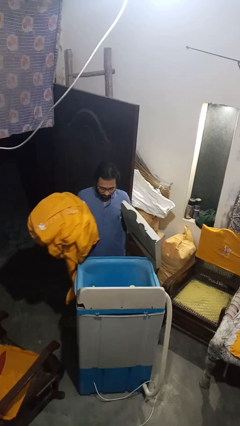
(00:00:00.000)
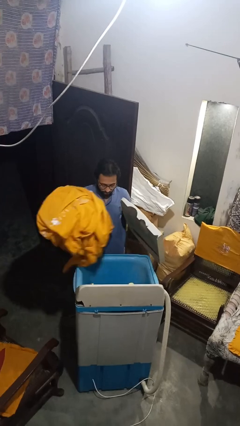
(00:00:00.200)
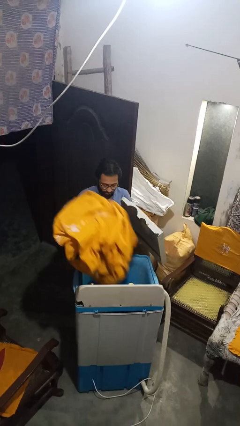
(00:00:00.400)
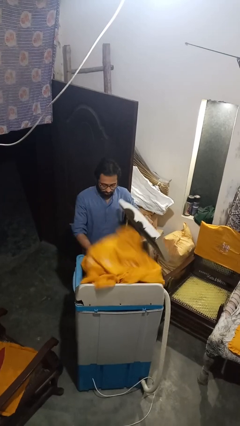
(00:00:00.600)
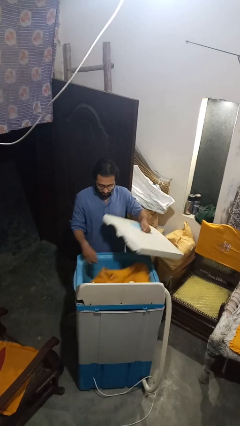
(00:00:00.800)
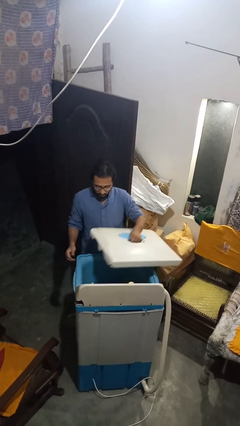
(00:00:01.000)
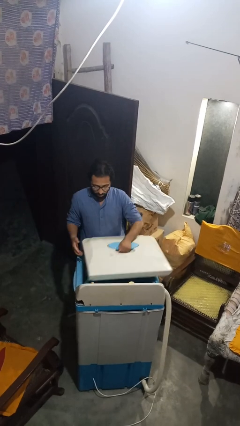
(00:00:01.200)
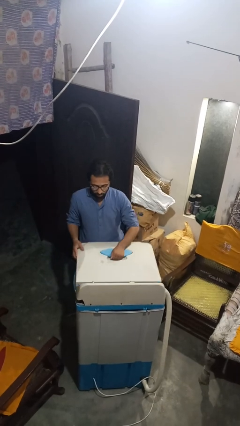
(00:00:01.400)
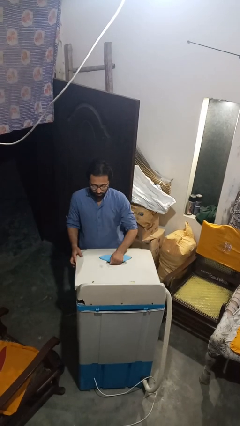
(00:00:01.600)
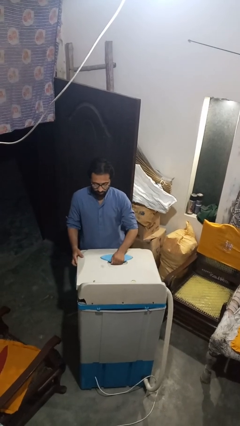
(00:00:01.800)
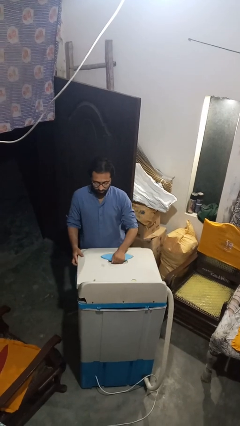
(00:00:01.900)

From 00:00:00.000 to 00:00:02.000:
person closes clothes washer

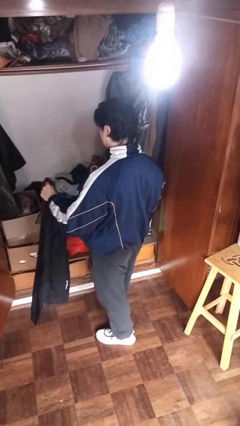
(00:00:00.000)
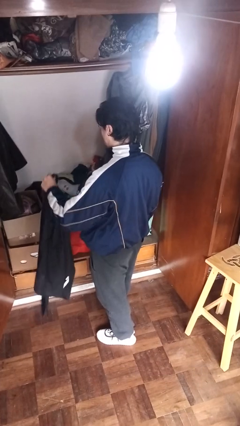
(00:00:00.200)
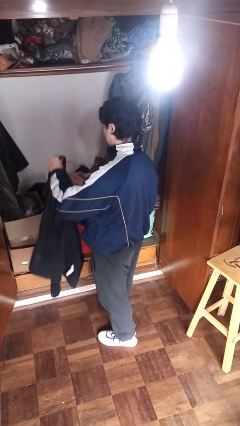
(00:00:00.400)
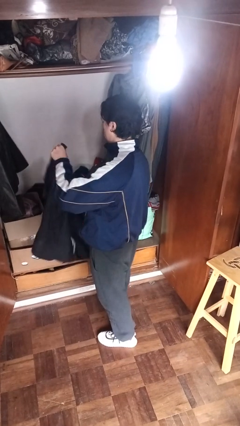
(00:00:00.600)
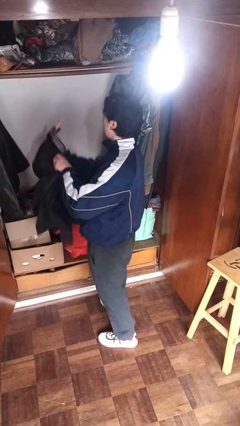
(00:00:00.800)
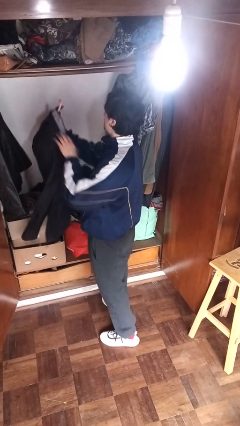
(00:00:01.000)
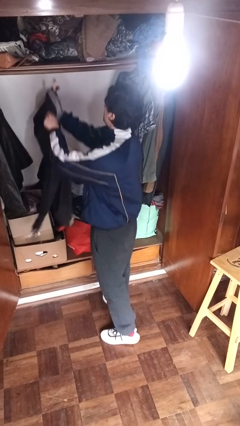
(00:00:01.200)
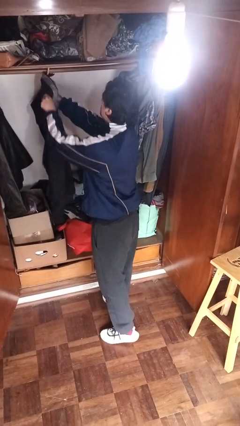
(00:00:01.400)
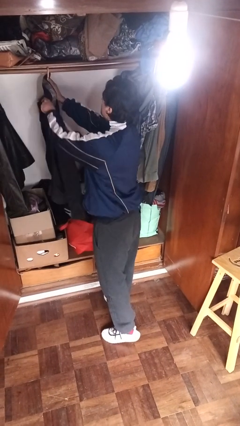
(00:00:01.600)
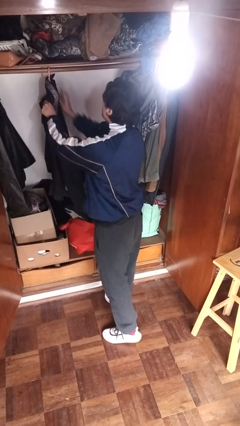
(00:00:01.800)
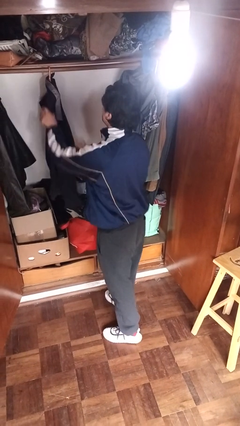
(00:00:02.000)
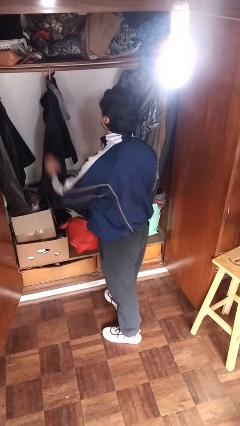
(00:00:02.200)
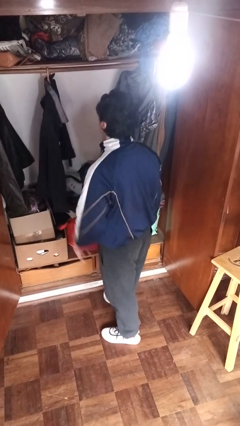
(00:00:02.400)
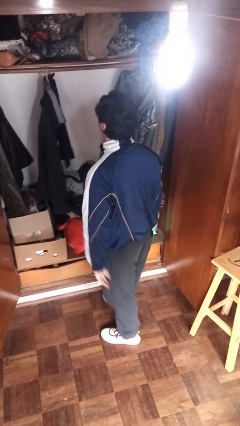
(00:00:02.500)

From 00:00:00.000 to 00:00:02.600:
person puts clothes into closet

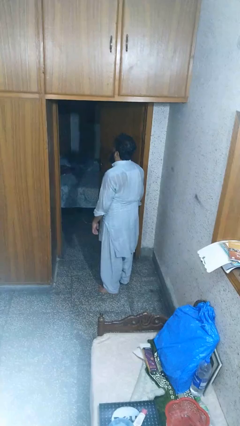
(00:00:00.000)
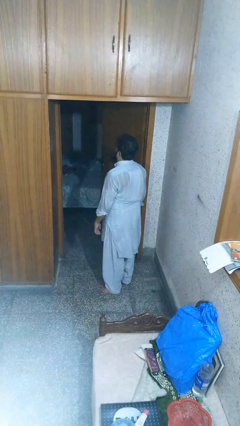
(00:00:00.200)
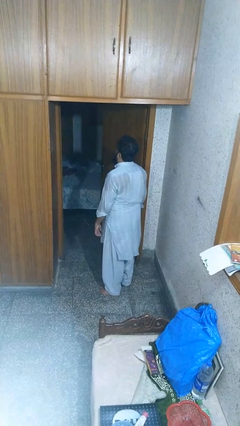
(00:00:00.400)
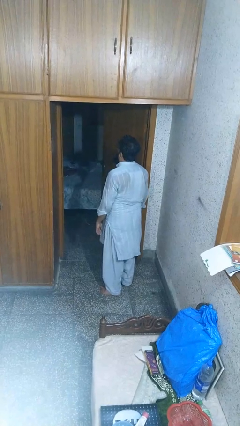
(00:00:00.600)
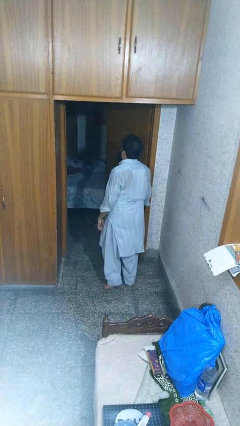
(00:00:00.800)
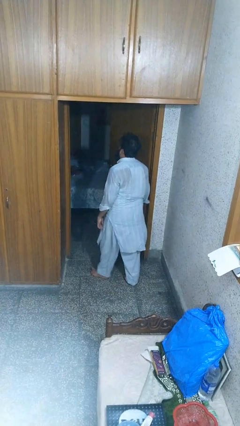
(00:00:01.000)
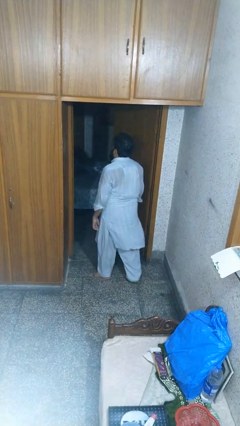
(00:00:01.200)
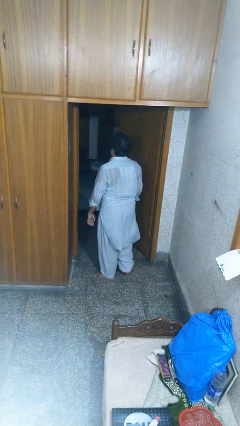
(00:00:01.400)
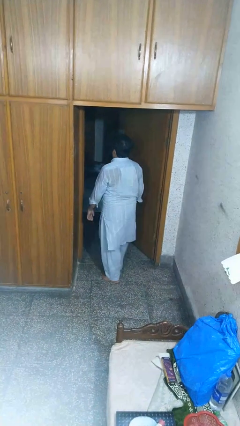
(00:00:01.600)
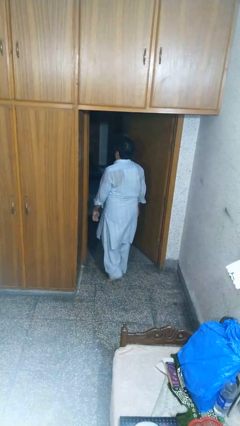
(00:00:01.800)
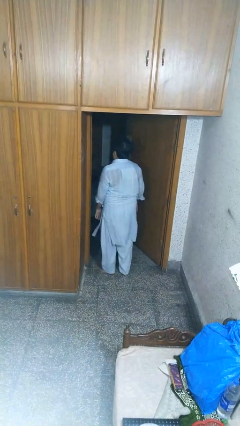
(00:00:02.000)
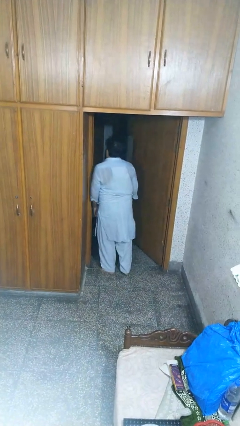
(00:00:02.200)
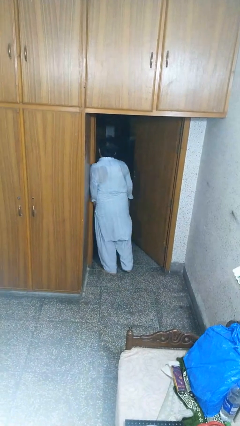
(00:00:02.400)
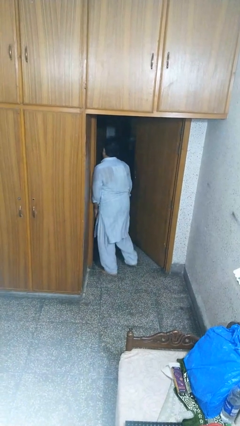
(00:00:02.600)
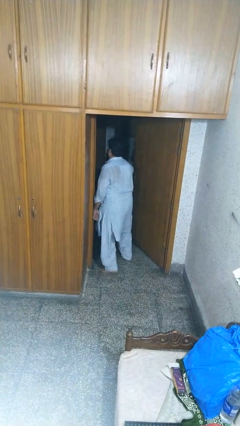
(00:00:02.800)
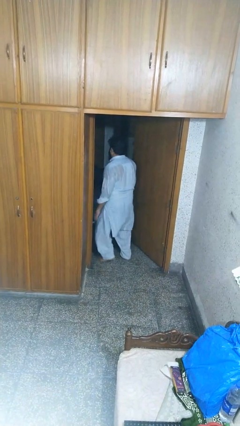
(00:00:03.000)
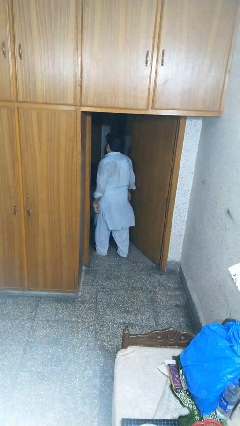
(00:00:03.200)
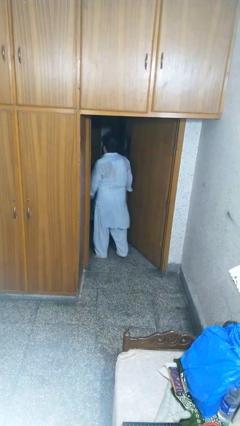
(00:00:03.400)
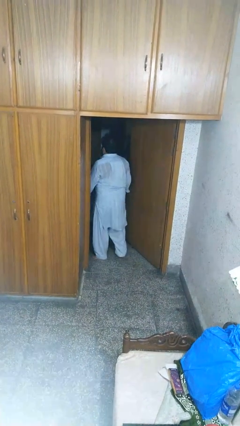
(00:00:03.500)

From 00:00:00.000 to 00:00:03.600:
person bumps into wall

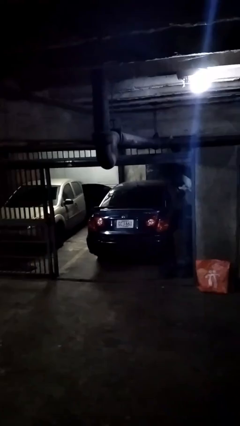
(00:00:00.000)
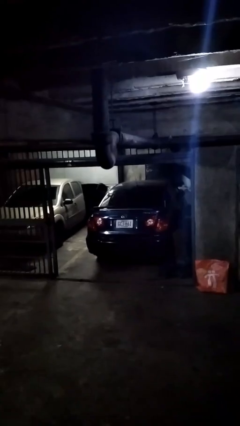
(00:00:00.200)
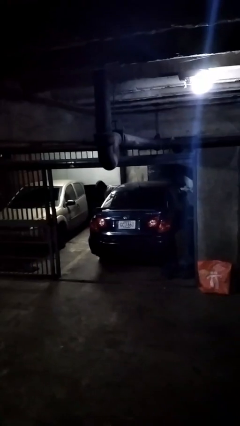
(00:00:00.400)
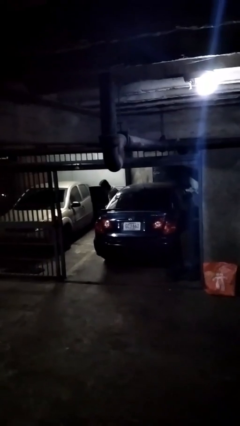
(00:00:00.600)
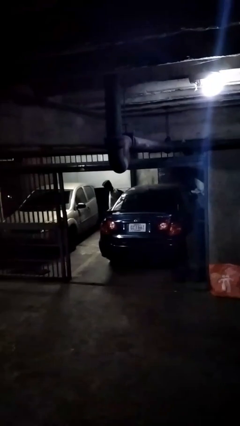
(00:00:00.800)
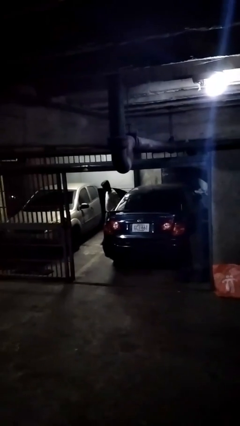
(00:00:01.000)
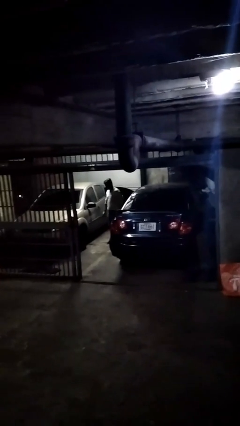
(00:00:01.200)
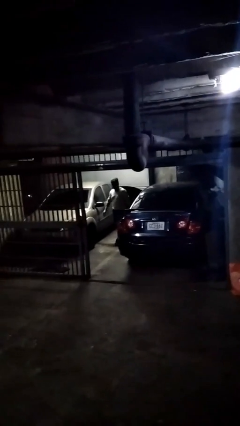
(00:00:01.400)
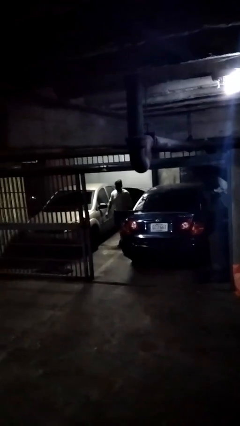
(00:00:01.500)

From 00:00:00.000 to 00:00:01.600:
person exits car

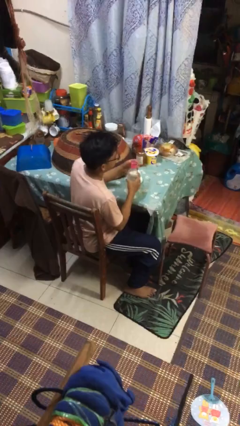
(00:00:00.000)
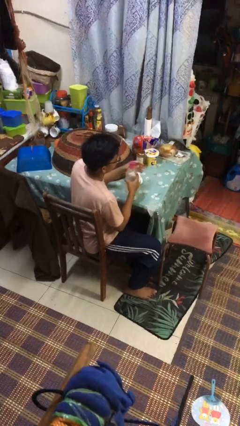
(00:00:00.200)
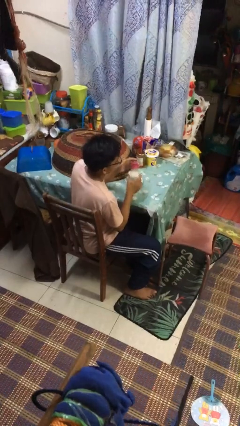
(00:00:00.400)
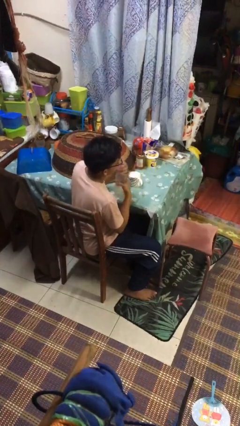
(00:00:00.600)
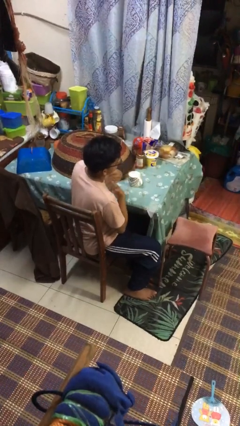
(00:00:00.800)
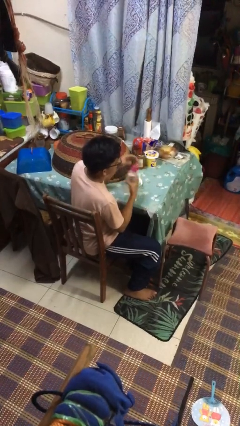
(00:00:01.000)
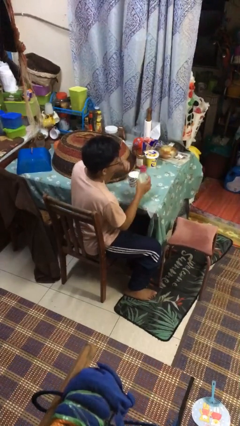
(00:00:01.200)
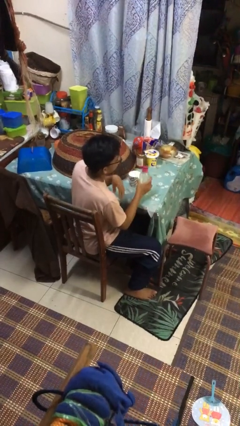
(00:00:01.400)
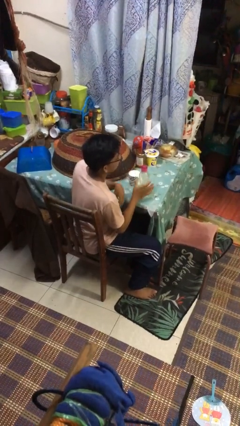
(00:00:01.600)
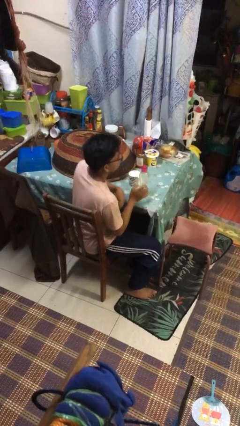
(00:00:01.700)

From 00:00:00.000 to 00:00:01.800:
person screws lid to bottle

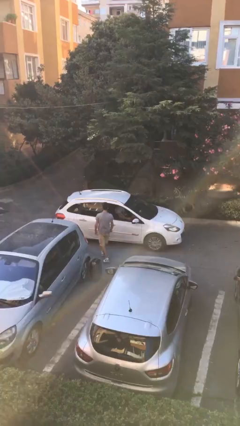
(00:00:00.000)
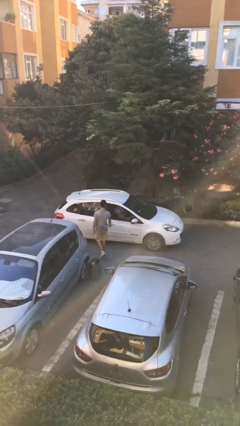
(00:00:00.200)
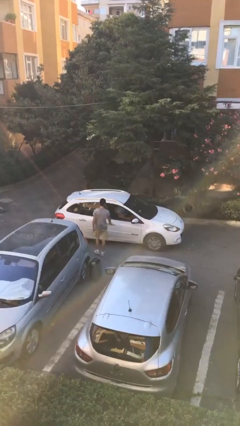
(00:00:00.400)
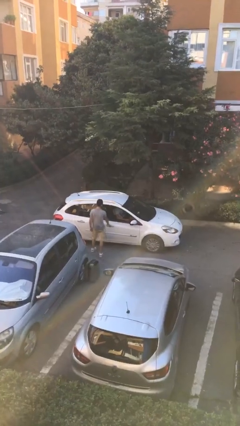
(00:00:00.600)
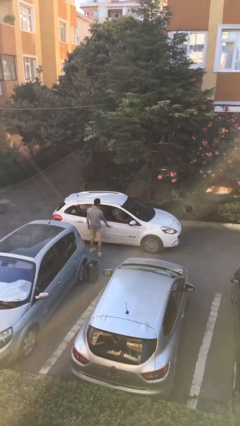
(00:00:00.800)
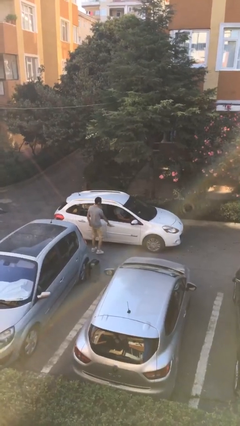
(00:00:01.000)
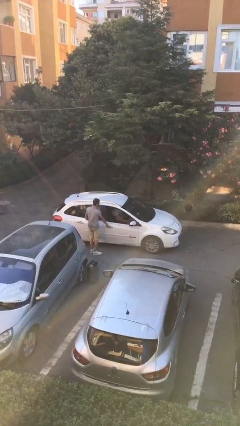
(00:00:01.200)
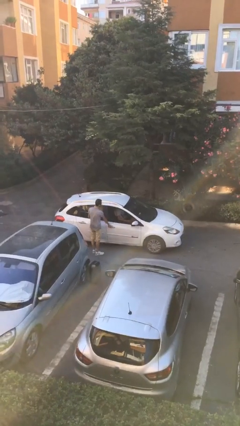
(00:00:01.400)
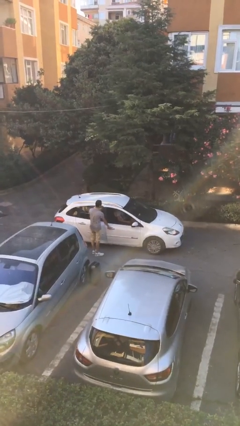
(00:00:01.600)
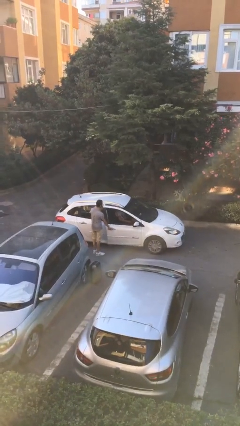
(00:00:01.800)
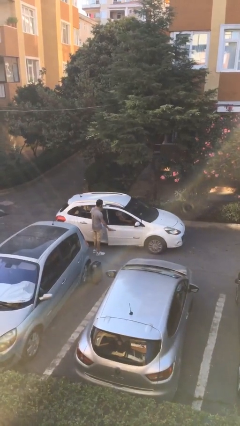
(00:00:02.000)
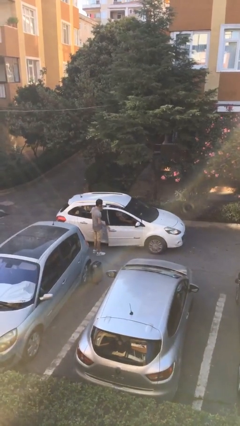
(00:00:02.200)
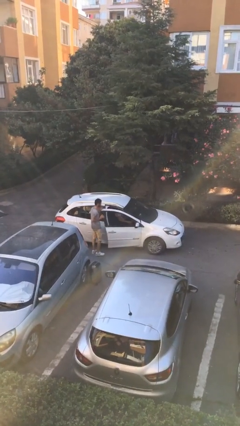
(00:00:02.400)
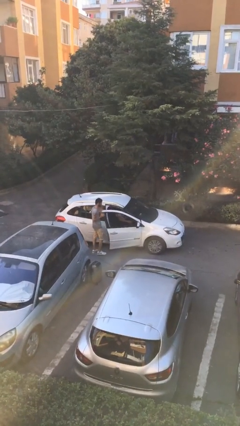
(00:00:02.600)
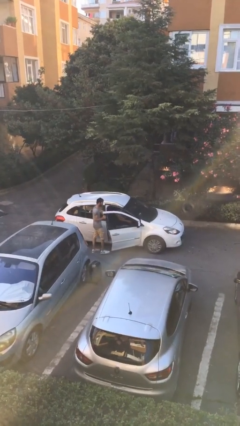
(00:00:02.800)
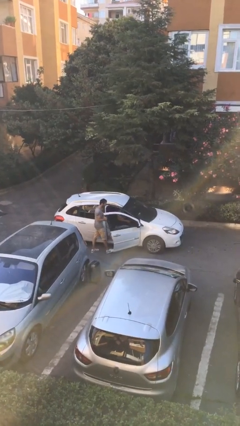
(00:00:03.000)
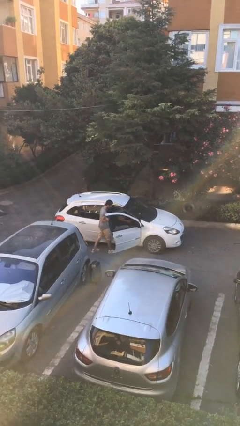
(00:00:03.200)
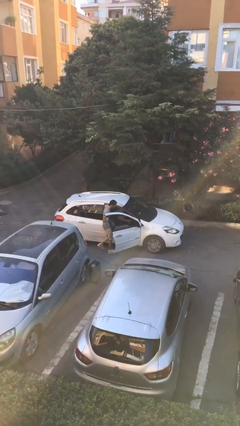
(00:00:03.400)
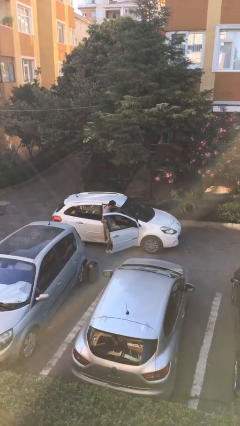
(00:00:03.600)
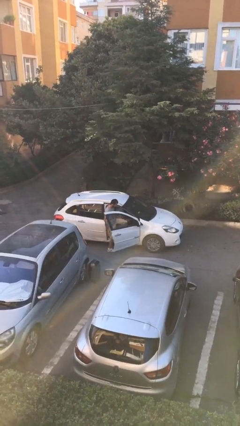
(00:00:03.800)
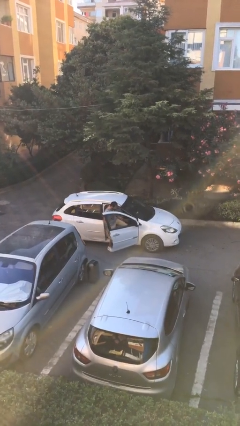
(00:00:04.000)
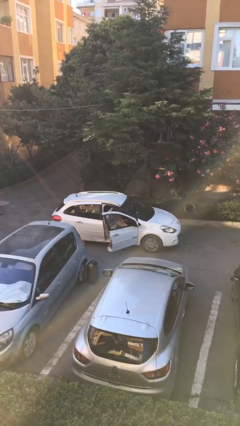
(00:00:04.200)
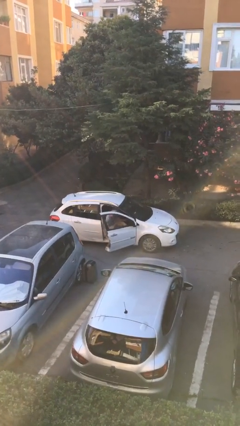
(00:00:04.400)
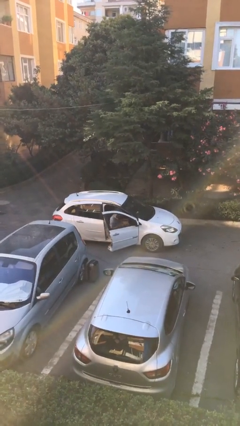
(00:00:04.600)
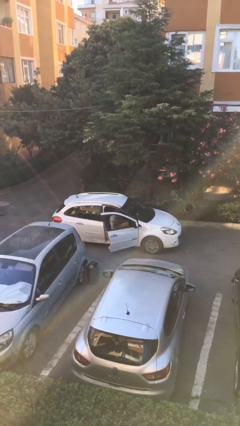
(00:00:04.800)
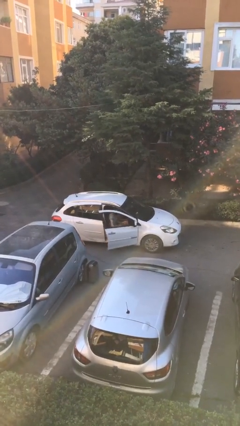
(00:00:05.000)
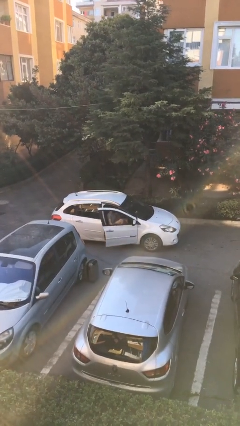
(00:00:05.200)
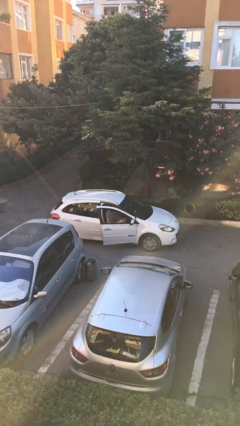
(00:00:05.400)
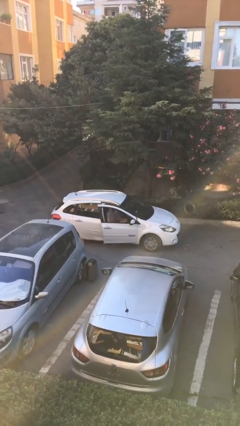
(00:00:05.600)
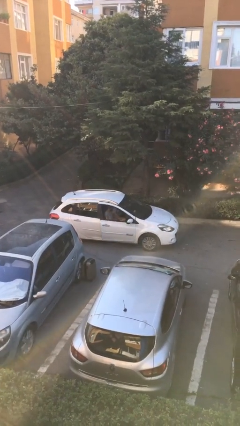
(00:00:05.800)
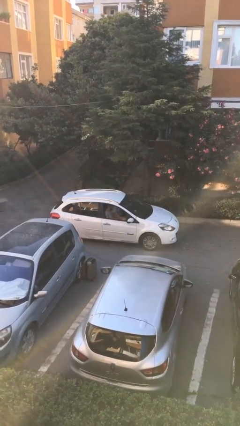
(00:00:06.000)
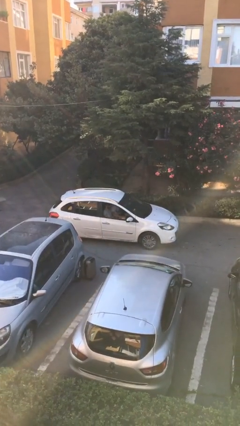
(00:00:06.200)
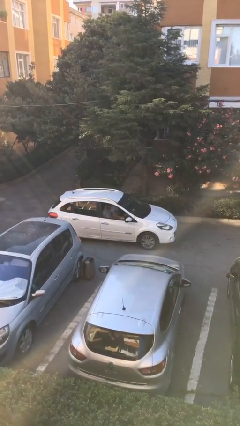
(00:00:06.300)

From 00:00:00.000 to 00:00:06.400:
car picks up person
